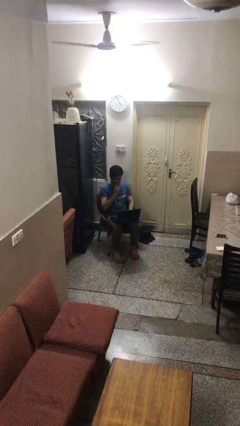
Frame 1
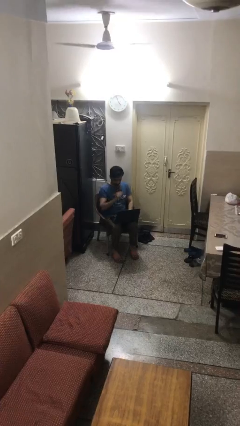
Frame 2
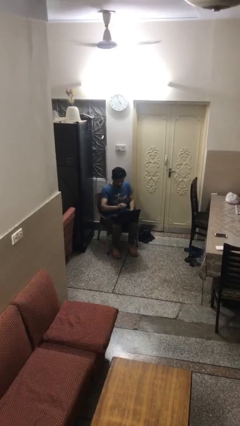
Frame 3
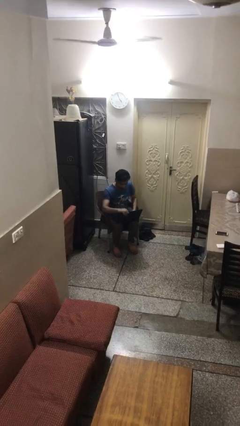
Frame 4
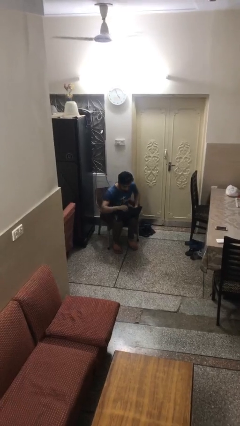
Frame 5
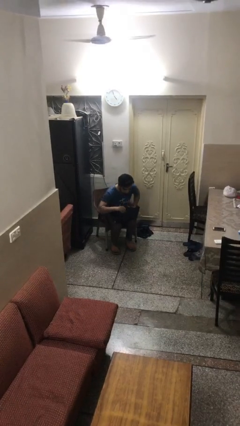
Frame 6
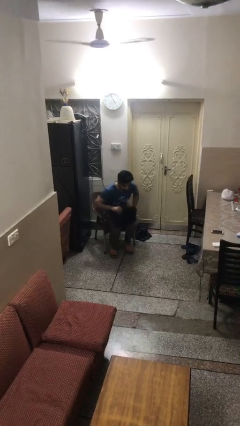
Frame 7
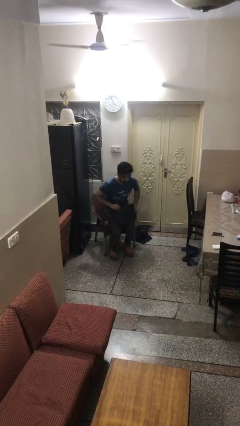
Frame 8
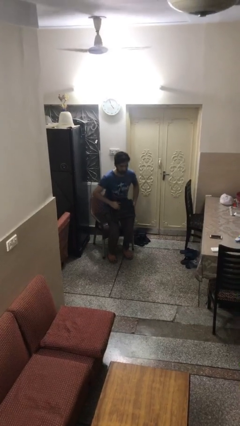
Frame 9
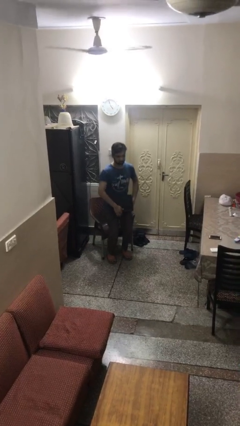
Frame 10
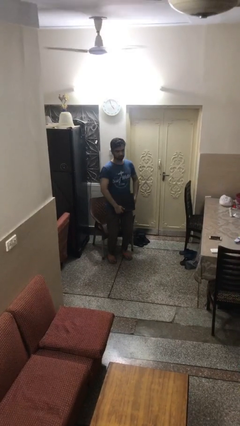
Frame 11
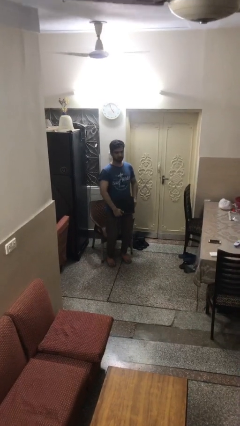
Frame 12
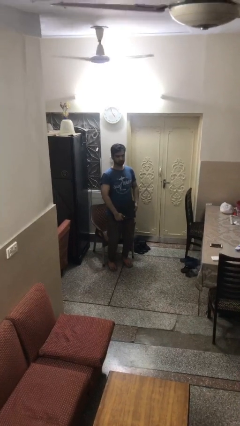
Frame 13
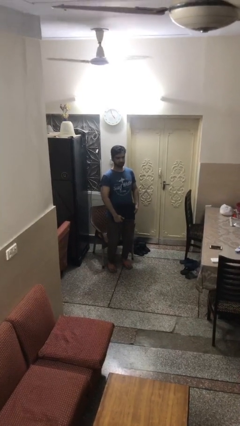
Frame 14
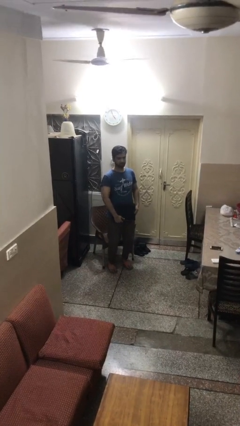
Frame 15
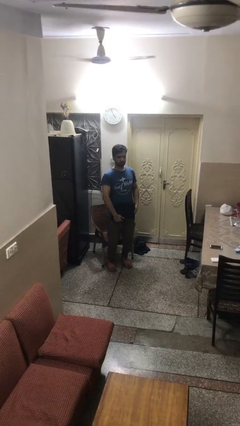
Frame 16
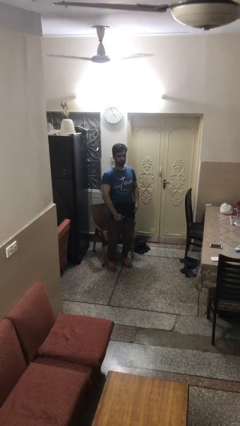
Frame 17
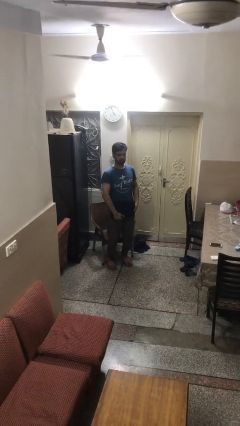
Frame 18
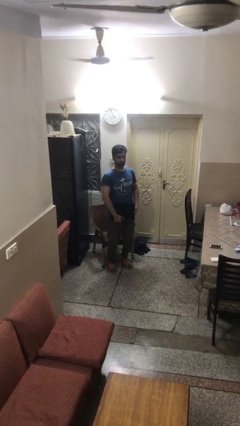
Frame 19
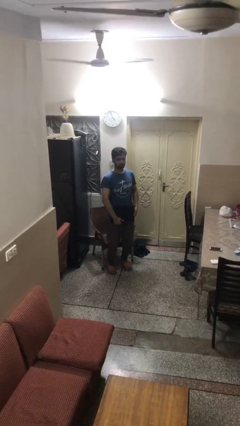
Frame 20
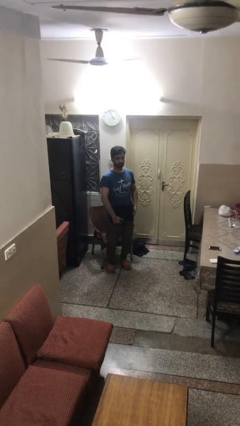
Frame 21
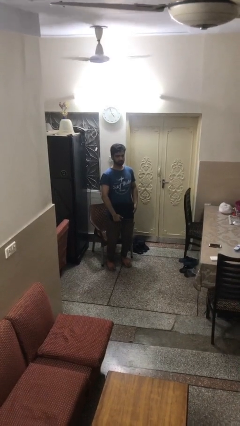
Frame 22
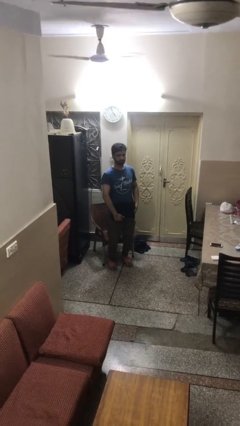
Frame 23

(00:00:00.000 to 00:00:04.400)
person stands up

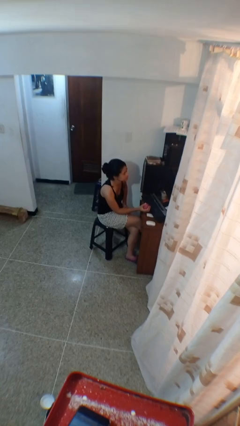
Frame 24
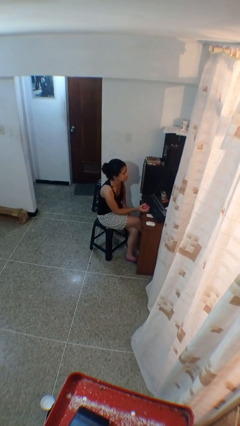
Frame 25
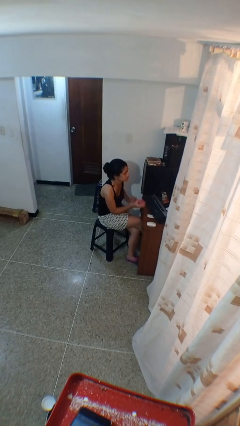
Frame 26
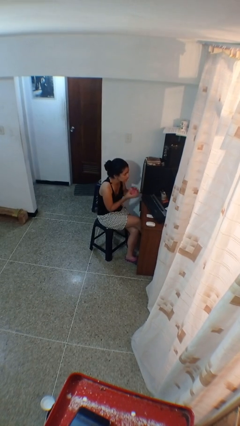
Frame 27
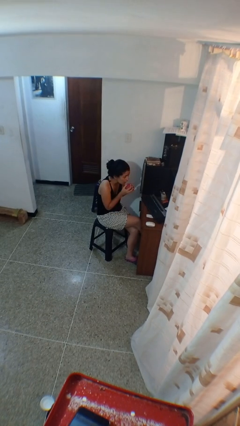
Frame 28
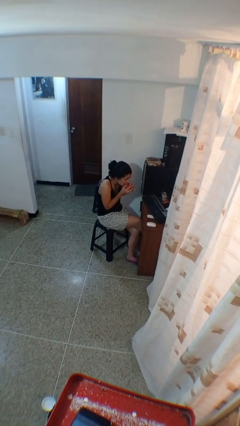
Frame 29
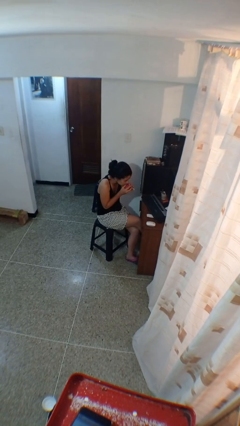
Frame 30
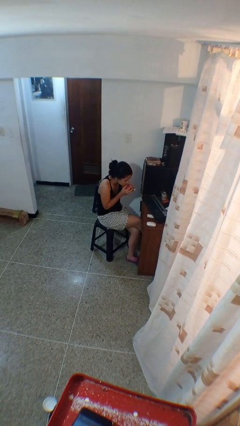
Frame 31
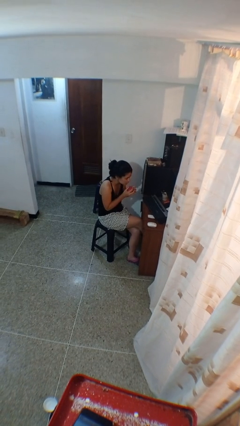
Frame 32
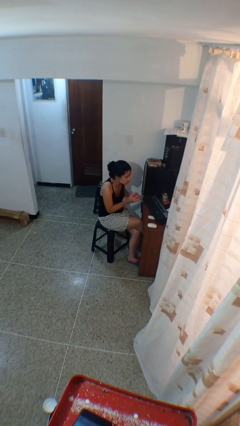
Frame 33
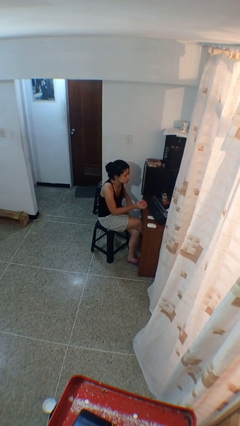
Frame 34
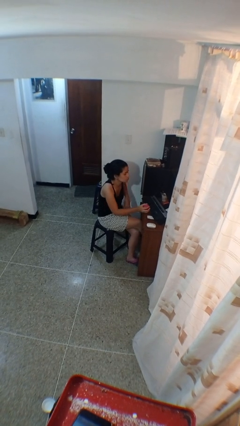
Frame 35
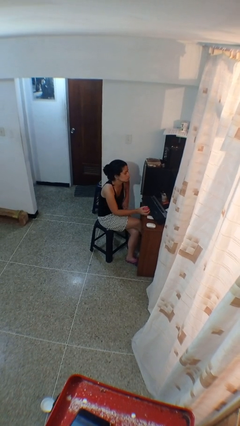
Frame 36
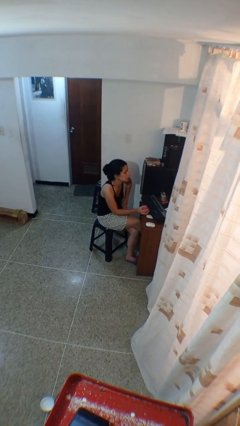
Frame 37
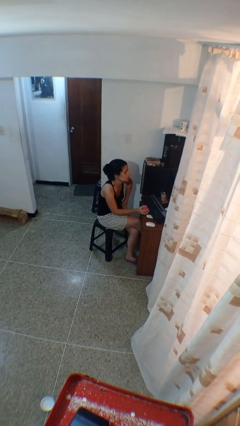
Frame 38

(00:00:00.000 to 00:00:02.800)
person eats apple

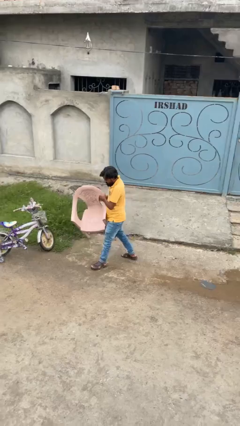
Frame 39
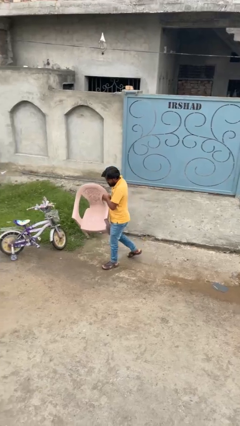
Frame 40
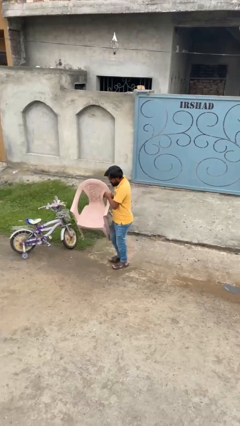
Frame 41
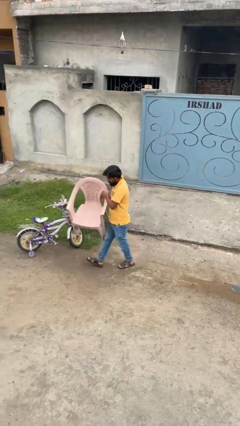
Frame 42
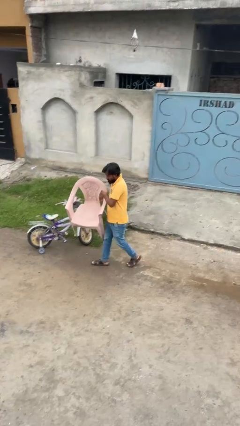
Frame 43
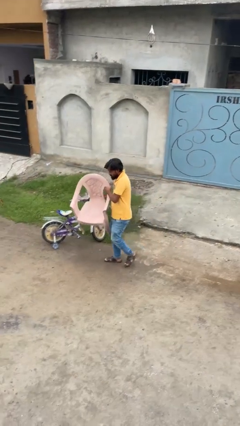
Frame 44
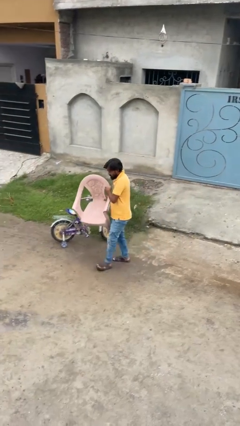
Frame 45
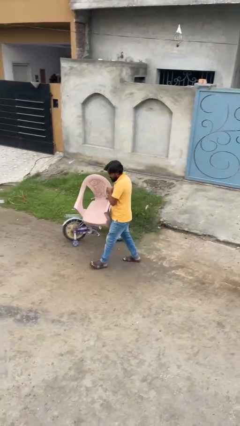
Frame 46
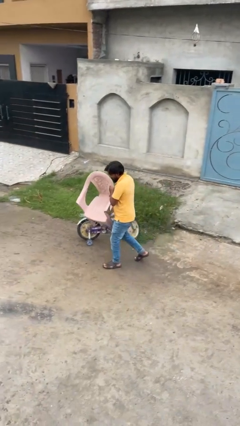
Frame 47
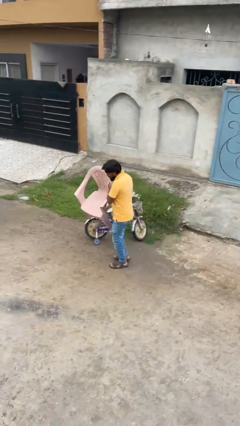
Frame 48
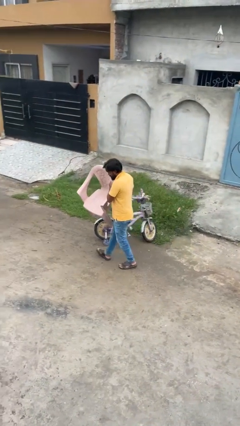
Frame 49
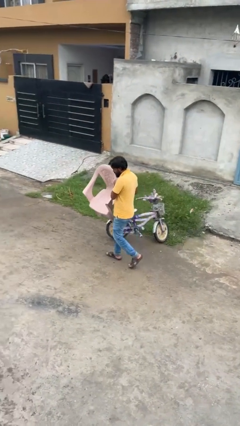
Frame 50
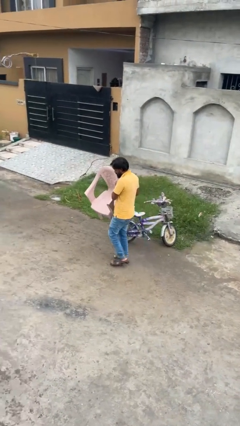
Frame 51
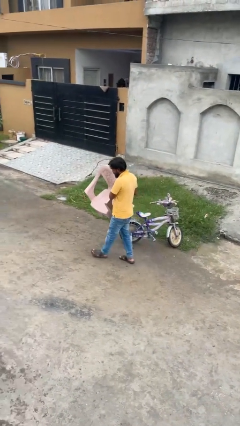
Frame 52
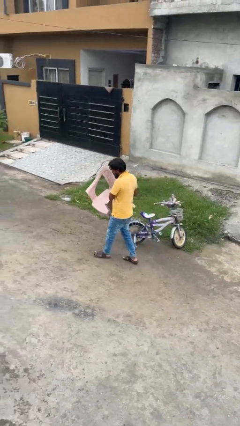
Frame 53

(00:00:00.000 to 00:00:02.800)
person carries furniture

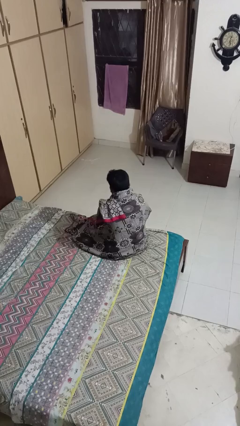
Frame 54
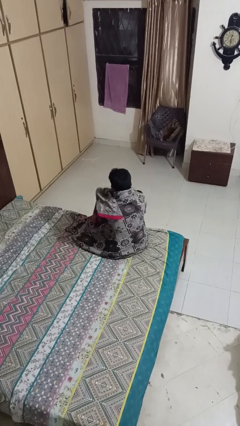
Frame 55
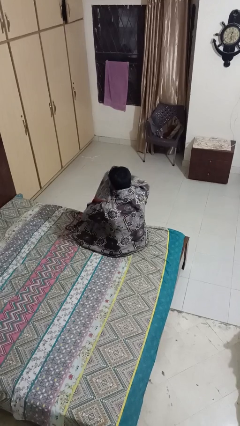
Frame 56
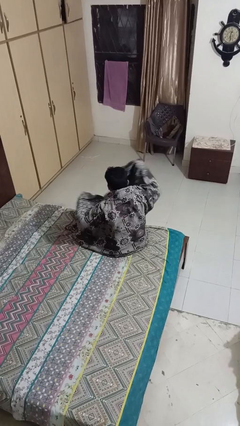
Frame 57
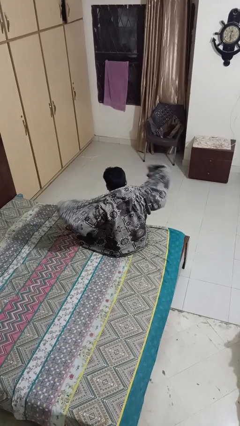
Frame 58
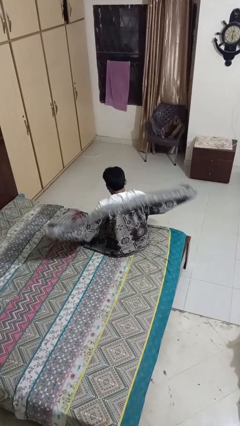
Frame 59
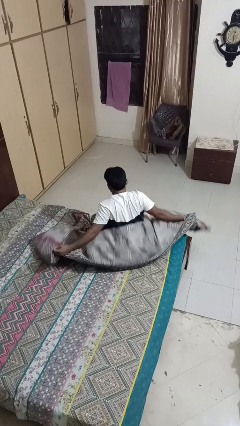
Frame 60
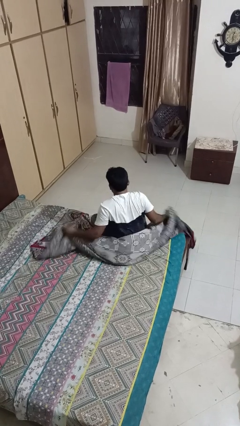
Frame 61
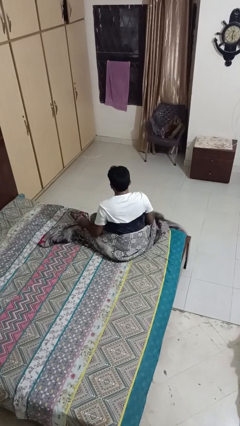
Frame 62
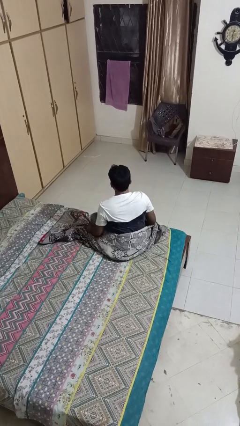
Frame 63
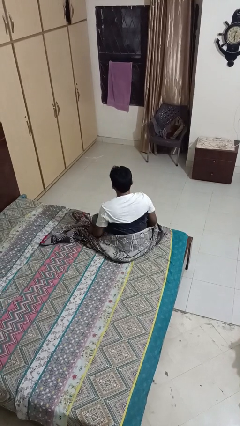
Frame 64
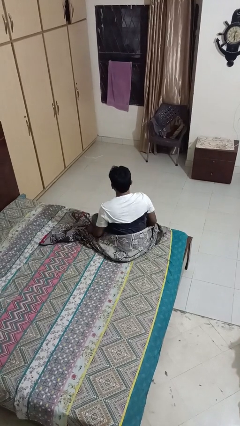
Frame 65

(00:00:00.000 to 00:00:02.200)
person uncovers with blanket

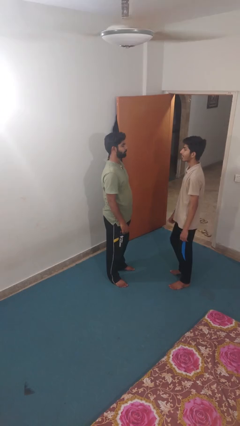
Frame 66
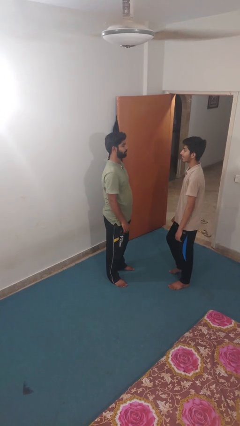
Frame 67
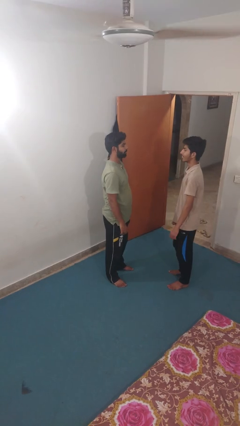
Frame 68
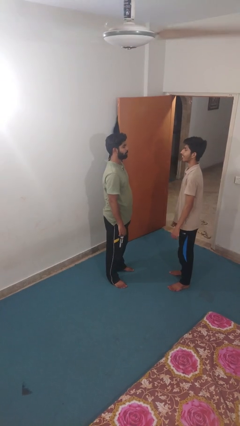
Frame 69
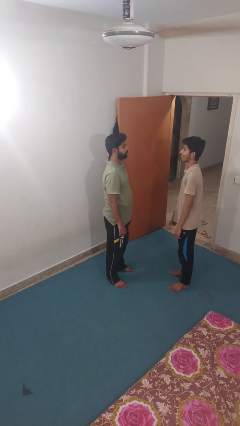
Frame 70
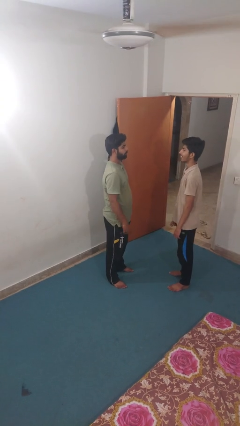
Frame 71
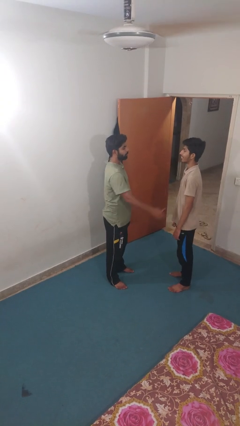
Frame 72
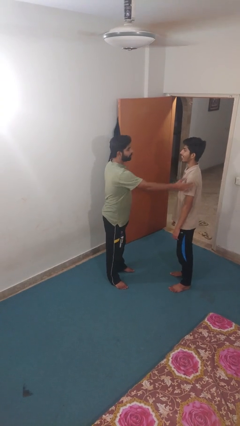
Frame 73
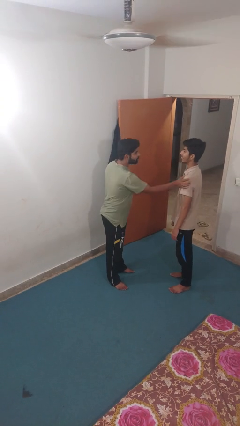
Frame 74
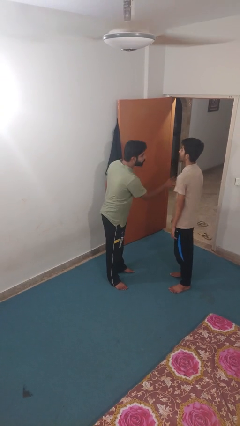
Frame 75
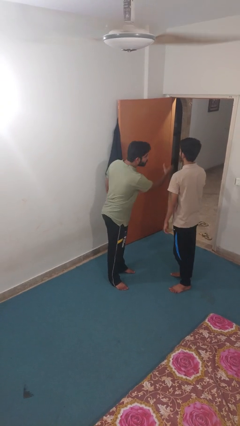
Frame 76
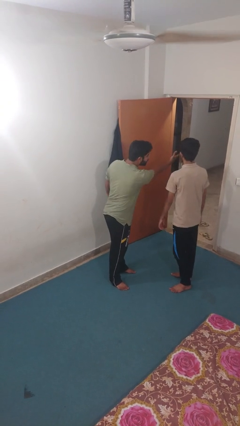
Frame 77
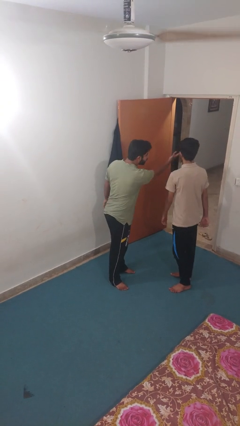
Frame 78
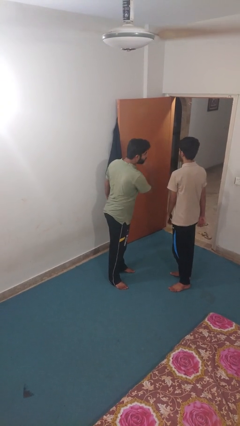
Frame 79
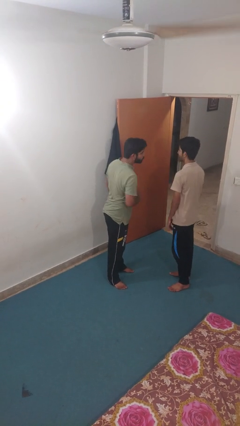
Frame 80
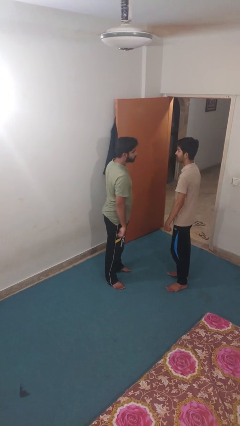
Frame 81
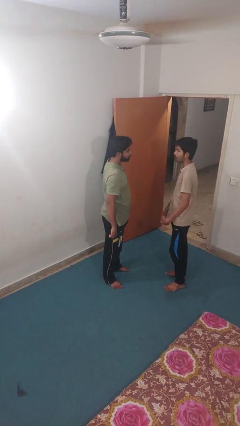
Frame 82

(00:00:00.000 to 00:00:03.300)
person shoves person

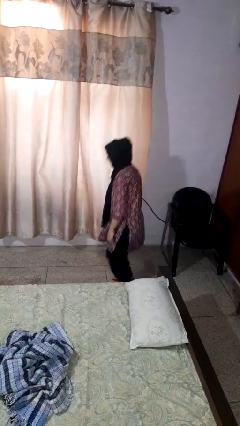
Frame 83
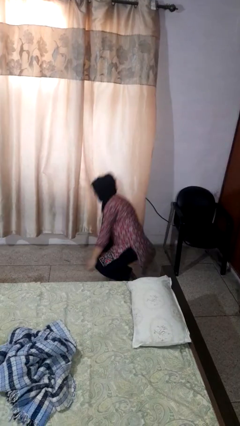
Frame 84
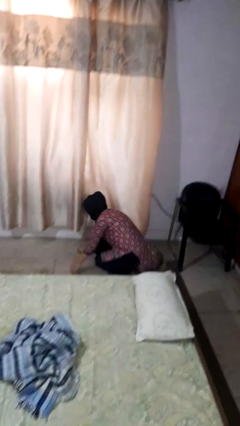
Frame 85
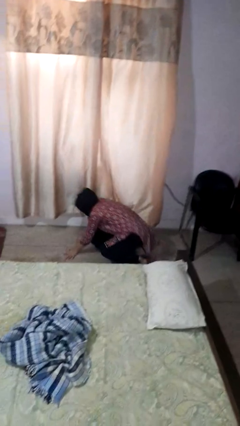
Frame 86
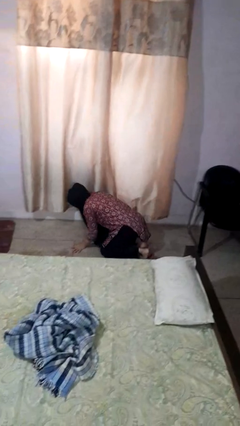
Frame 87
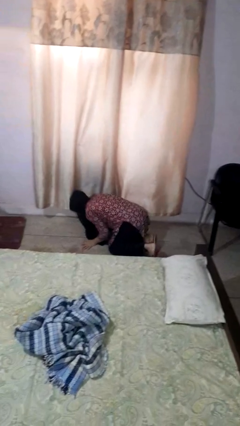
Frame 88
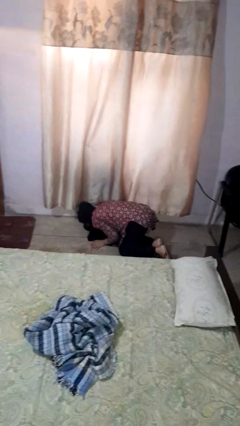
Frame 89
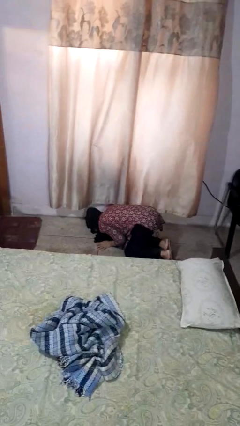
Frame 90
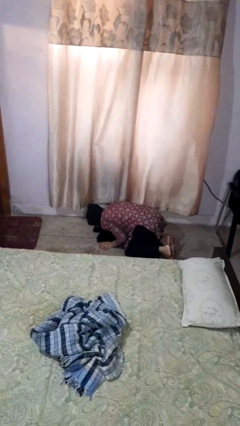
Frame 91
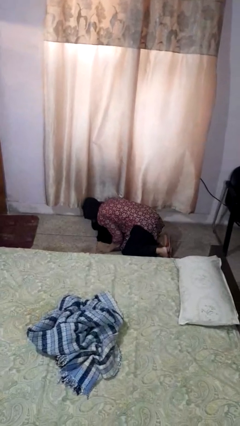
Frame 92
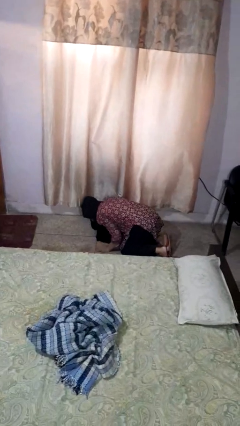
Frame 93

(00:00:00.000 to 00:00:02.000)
person falls while standing
